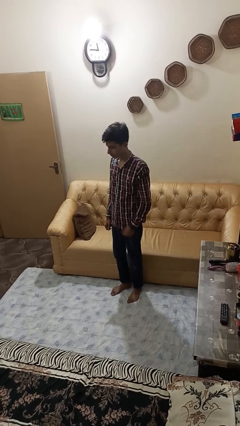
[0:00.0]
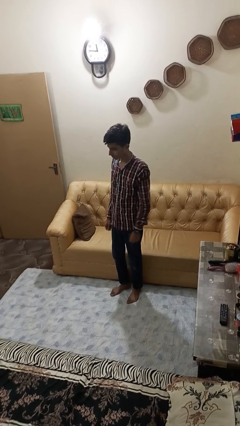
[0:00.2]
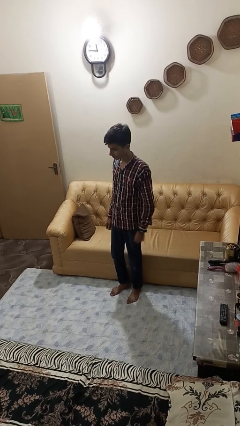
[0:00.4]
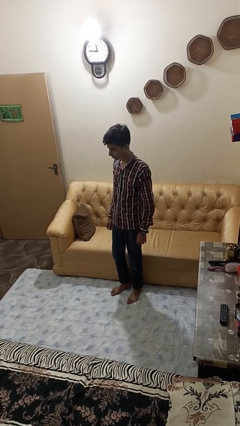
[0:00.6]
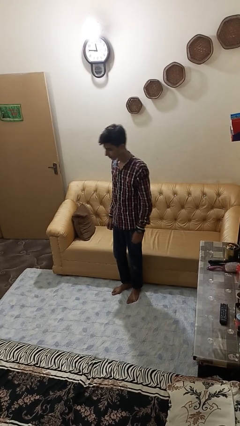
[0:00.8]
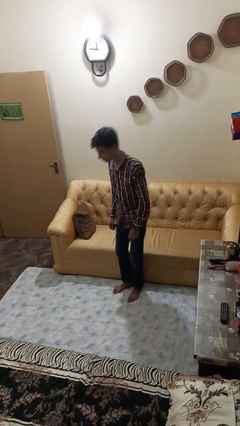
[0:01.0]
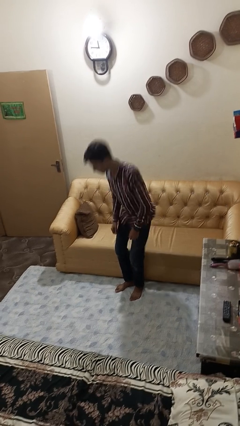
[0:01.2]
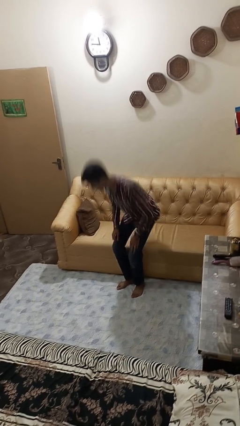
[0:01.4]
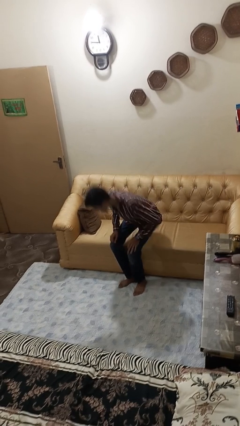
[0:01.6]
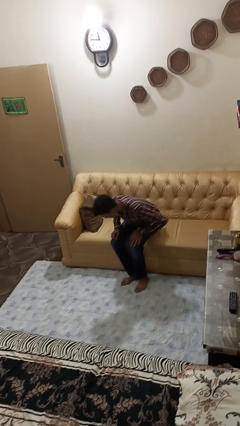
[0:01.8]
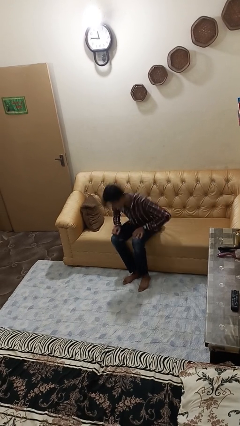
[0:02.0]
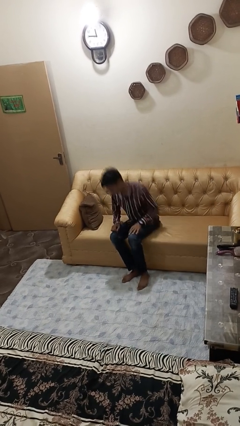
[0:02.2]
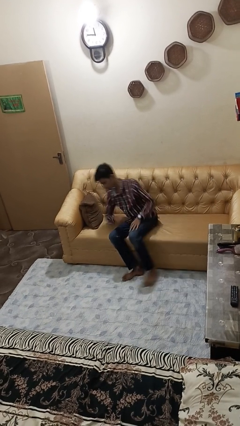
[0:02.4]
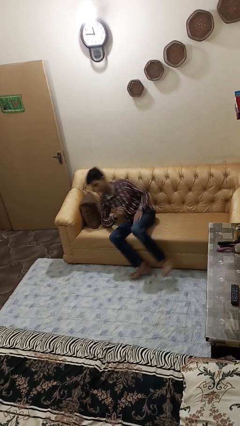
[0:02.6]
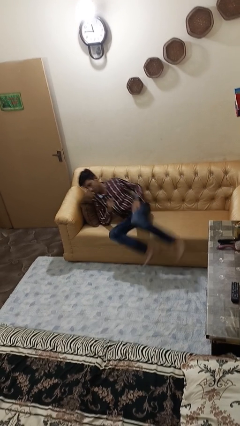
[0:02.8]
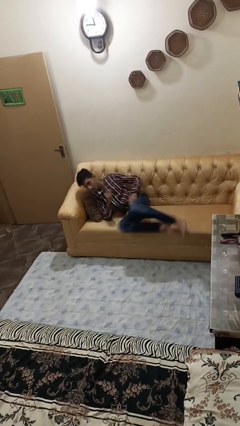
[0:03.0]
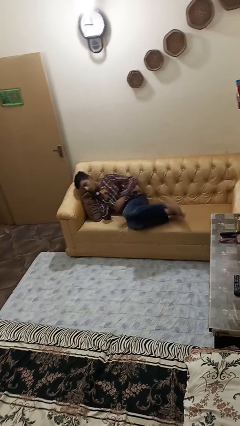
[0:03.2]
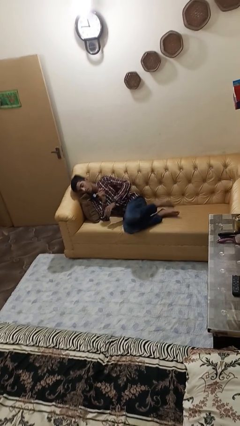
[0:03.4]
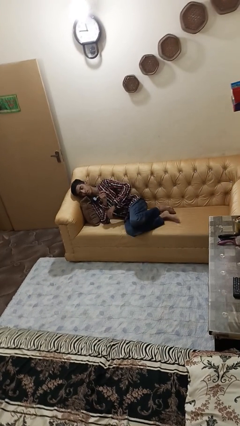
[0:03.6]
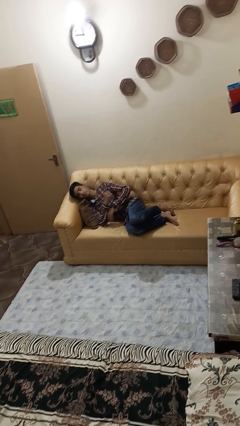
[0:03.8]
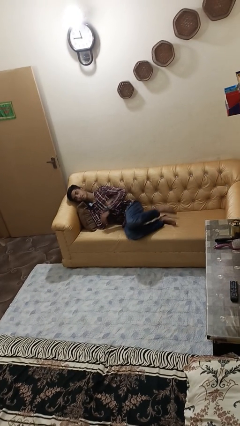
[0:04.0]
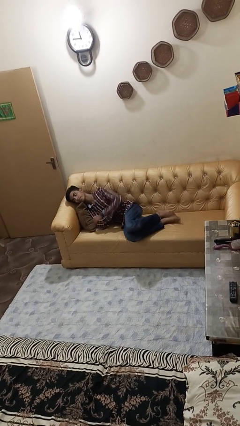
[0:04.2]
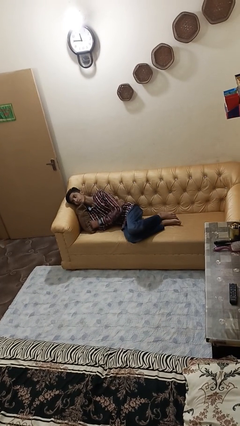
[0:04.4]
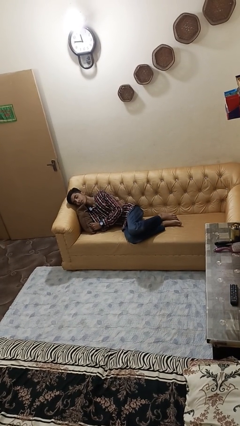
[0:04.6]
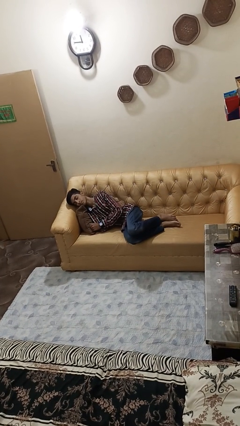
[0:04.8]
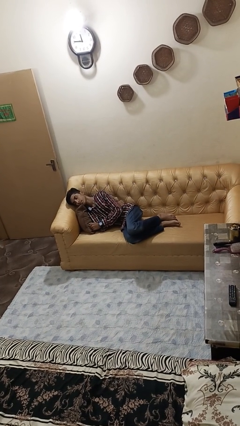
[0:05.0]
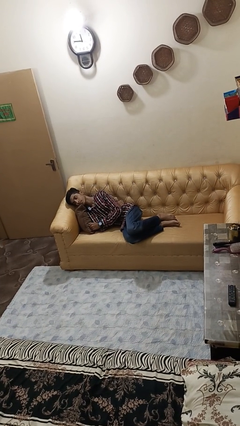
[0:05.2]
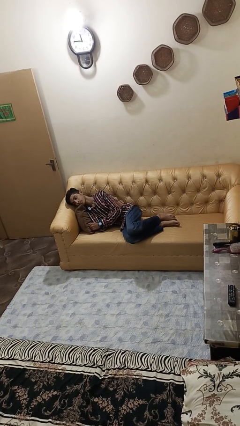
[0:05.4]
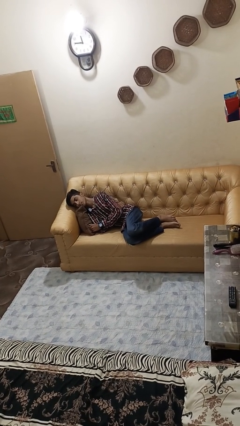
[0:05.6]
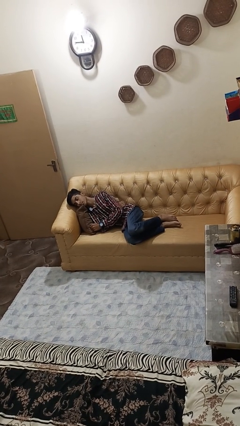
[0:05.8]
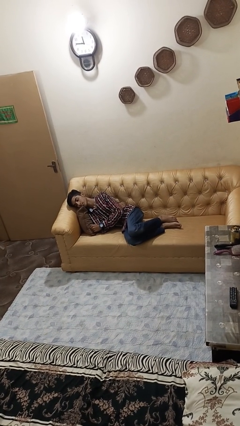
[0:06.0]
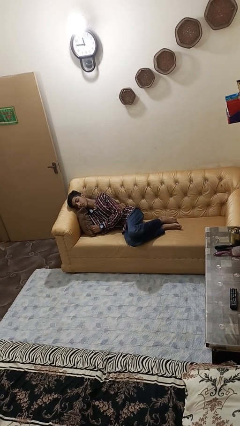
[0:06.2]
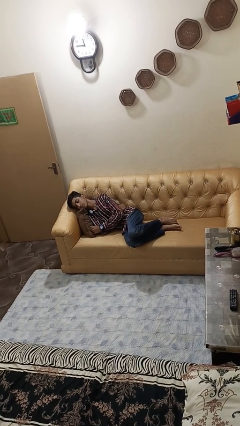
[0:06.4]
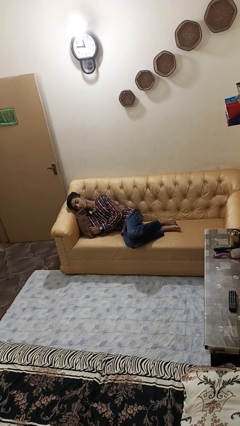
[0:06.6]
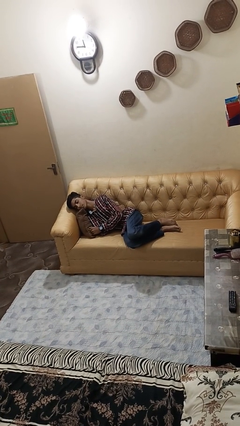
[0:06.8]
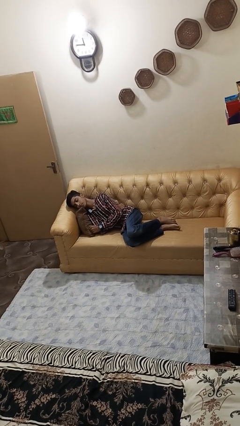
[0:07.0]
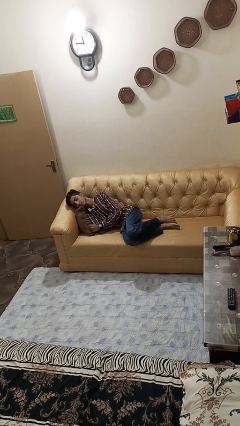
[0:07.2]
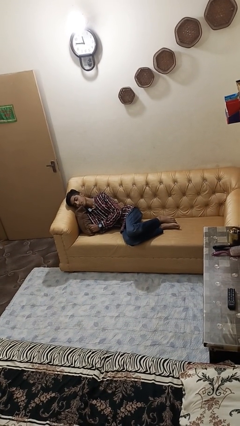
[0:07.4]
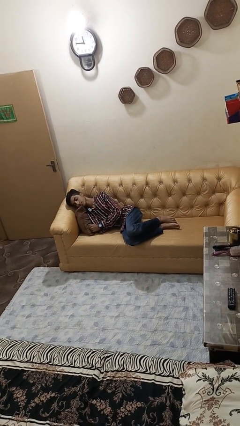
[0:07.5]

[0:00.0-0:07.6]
person lies down on couch

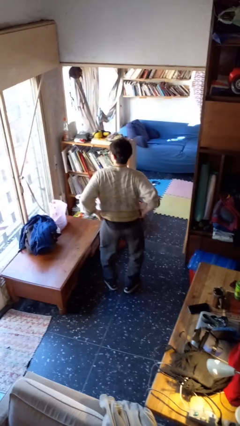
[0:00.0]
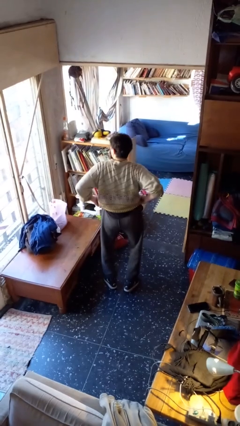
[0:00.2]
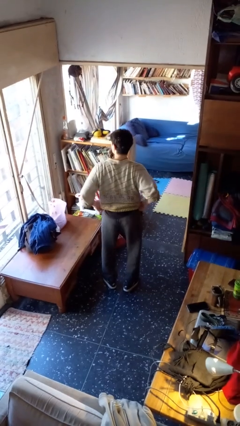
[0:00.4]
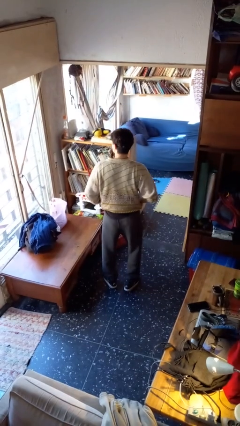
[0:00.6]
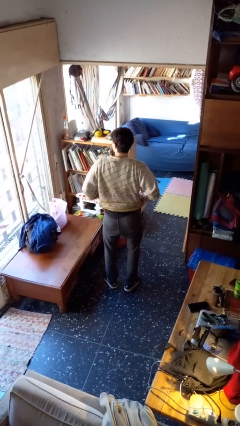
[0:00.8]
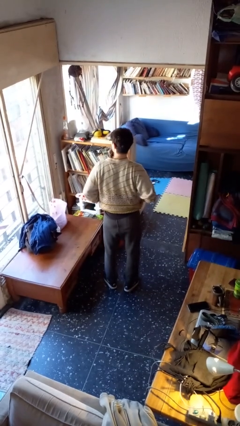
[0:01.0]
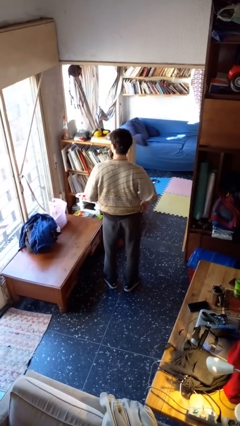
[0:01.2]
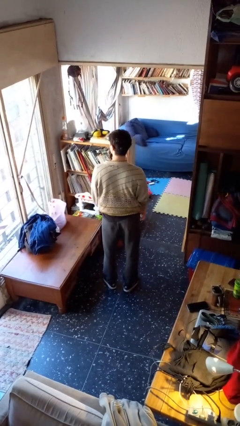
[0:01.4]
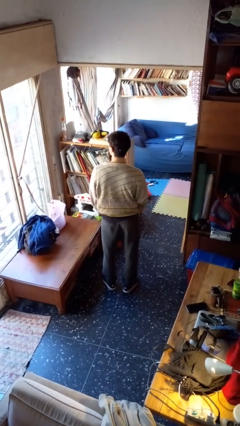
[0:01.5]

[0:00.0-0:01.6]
person hikes up pants

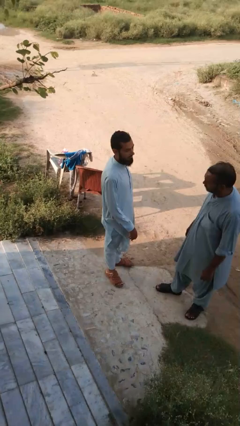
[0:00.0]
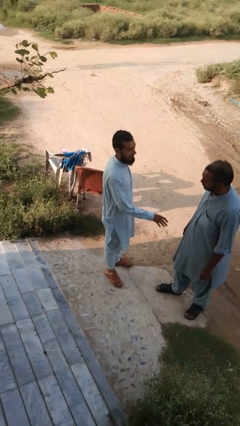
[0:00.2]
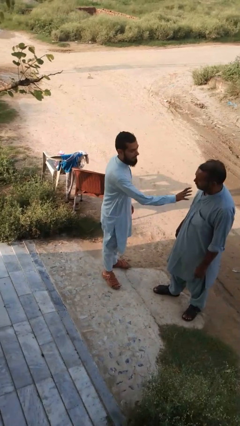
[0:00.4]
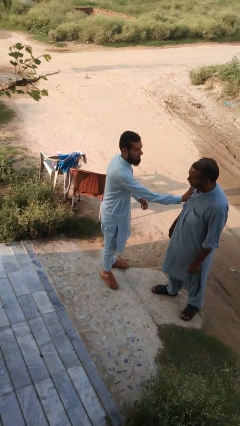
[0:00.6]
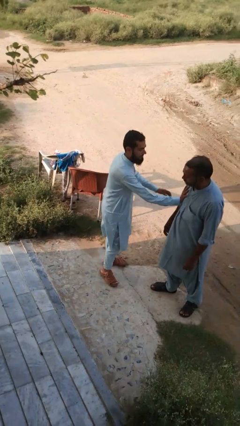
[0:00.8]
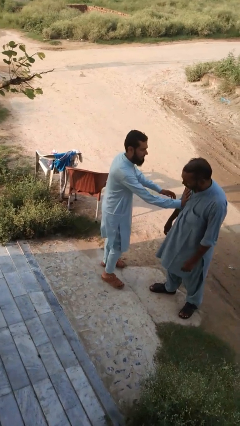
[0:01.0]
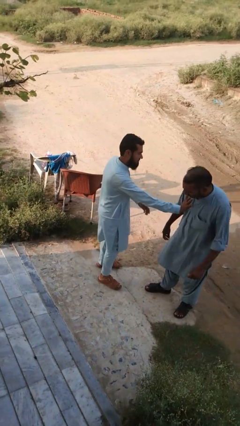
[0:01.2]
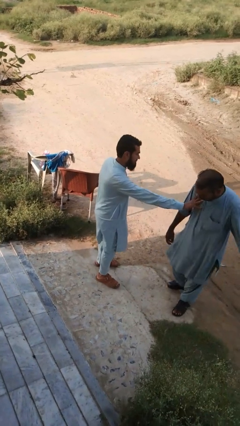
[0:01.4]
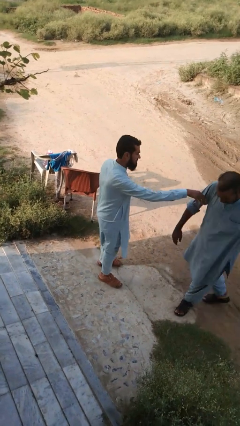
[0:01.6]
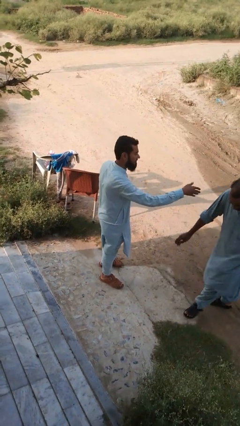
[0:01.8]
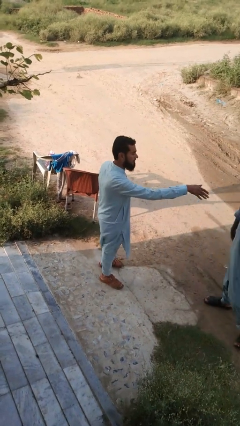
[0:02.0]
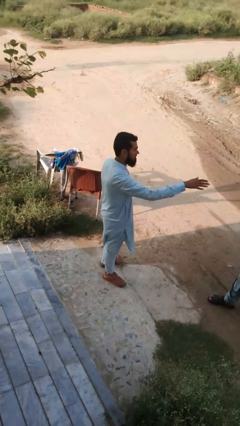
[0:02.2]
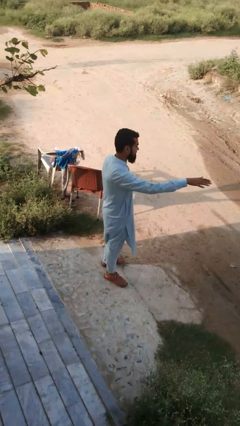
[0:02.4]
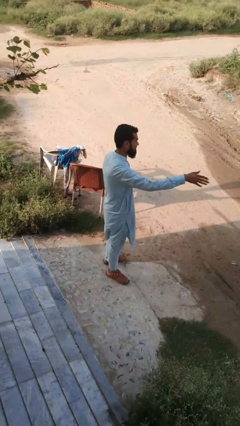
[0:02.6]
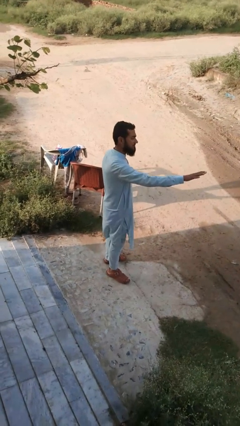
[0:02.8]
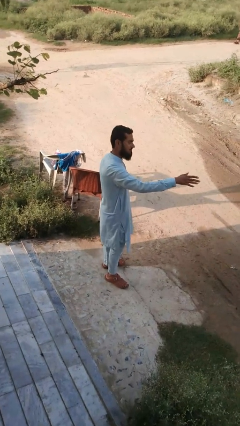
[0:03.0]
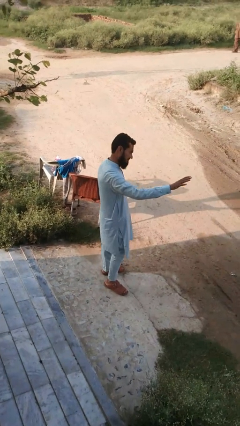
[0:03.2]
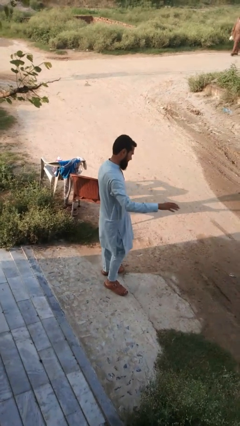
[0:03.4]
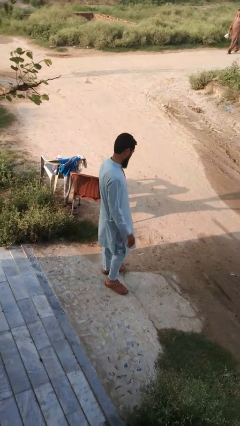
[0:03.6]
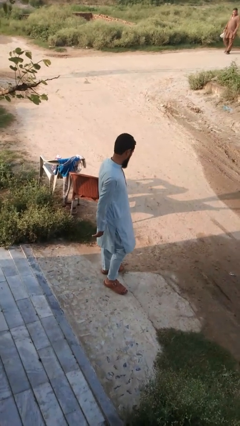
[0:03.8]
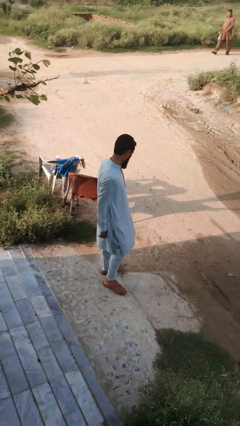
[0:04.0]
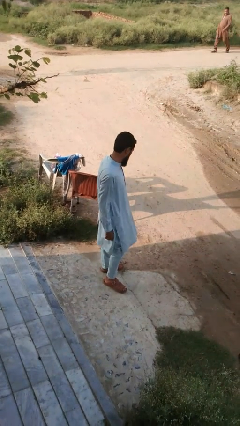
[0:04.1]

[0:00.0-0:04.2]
person shoves person

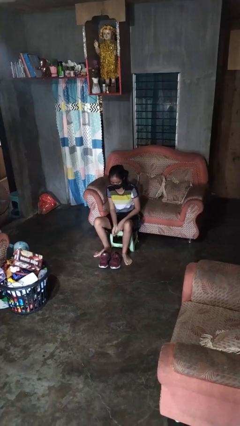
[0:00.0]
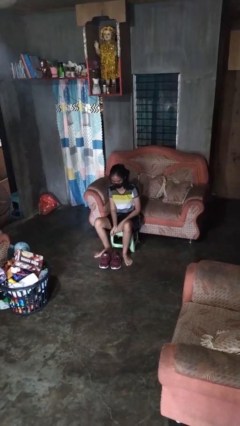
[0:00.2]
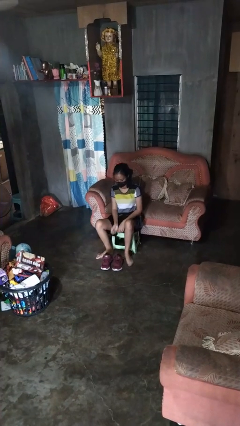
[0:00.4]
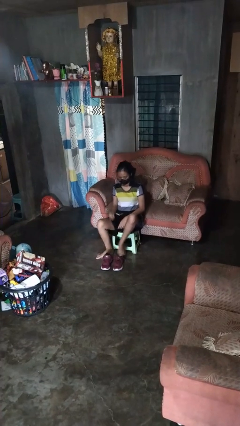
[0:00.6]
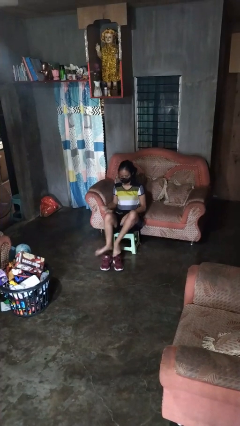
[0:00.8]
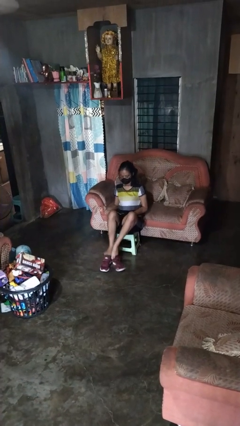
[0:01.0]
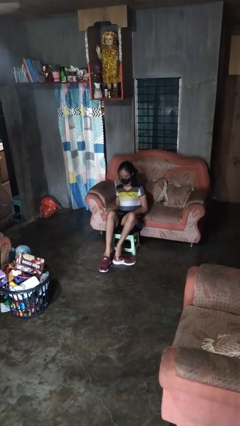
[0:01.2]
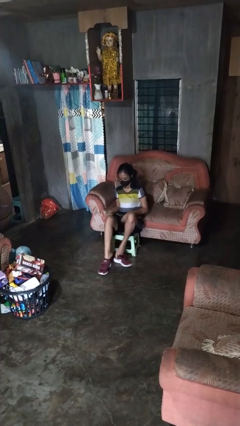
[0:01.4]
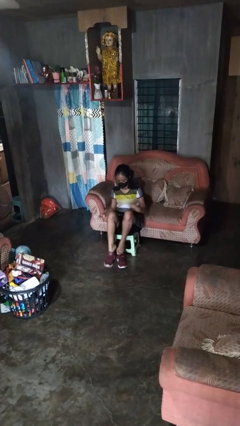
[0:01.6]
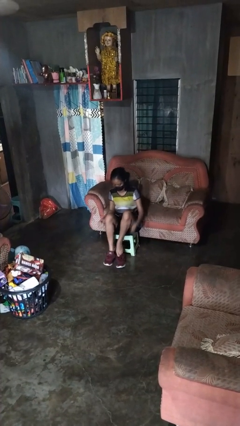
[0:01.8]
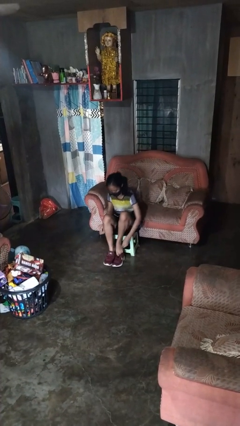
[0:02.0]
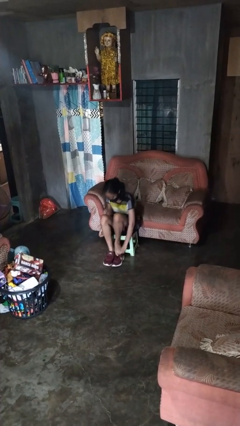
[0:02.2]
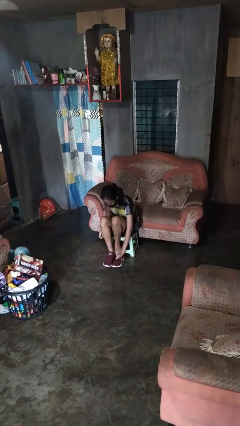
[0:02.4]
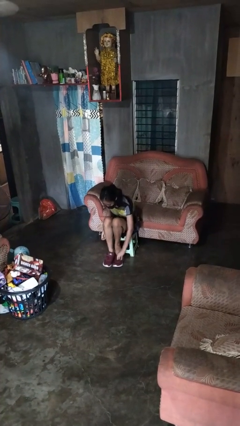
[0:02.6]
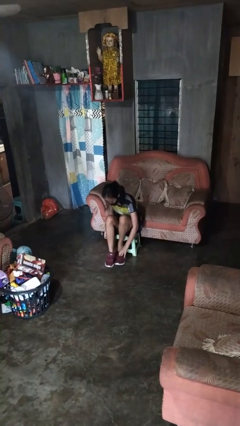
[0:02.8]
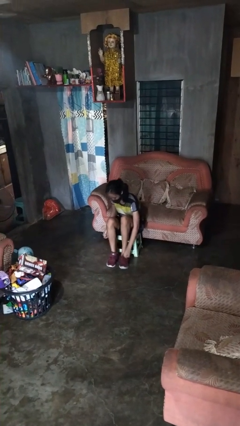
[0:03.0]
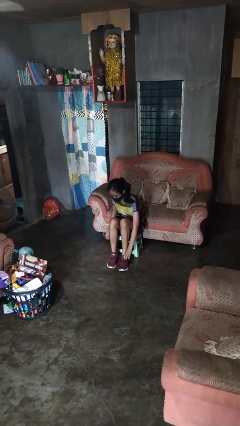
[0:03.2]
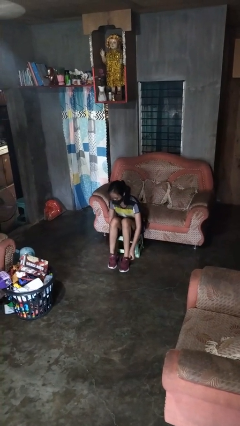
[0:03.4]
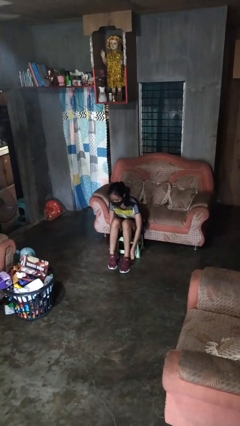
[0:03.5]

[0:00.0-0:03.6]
person puts on shoes

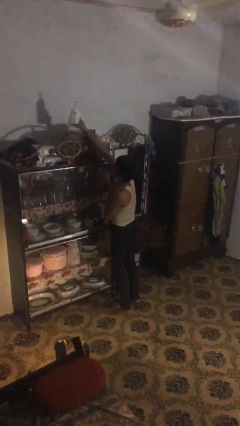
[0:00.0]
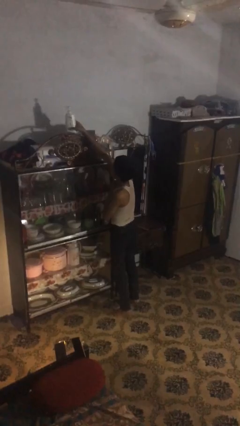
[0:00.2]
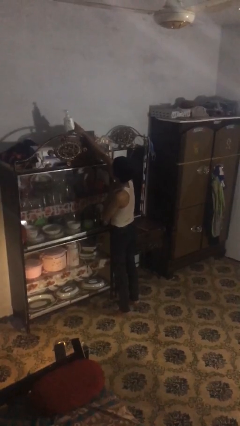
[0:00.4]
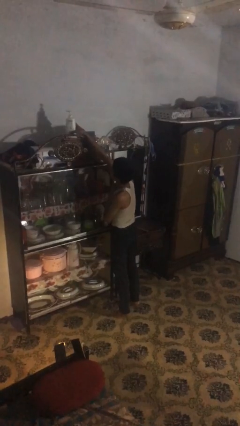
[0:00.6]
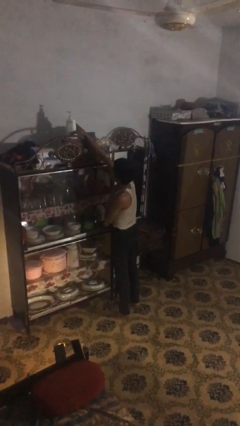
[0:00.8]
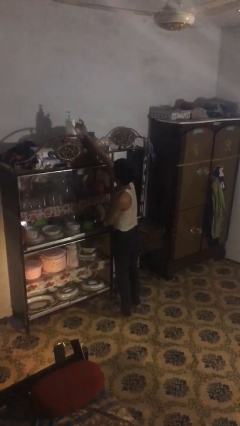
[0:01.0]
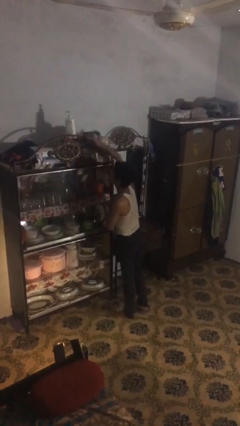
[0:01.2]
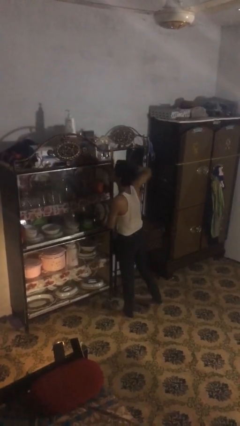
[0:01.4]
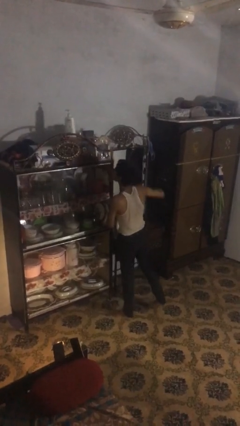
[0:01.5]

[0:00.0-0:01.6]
person puts down object on shelf
